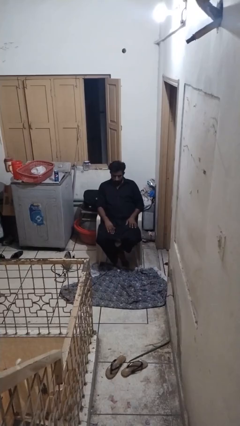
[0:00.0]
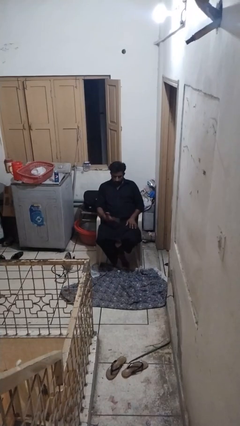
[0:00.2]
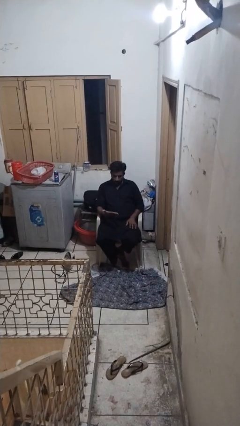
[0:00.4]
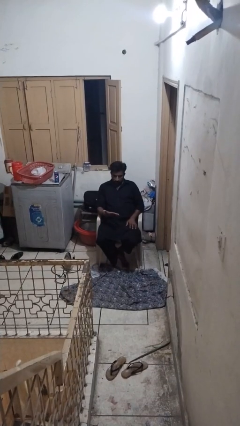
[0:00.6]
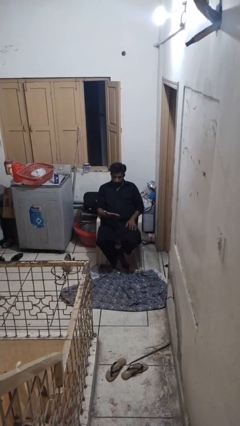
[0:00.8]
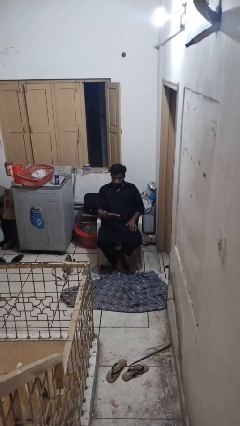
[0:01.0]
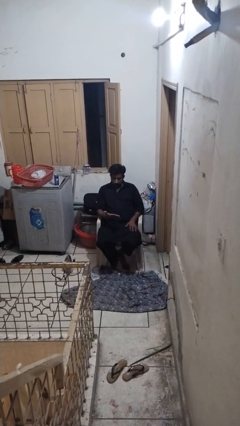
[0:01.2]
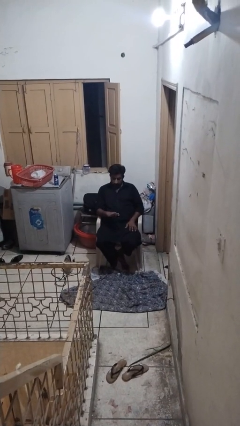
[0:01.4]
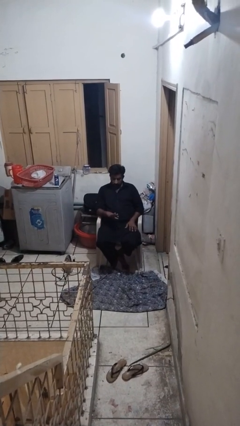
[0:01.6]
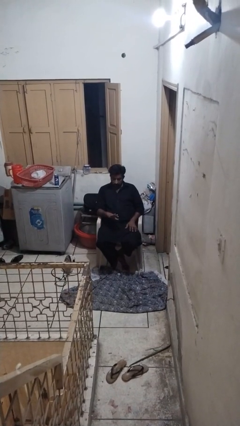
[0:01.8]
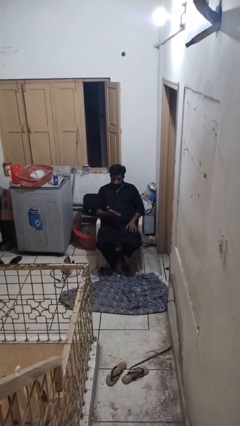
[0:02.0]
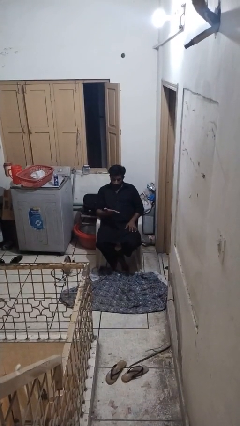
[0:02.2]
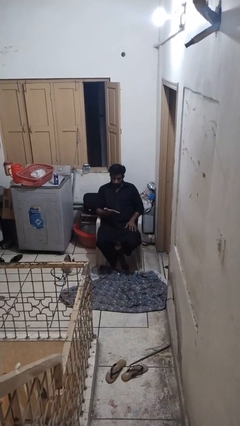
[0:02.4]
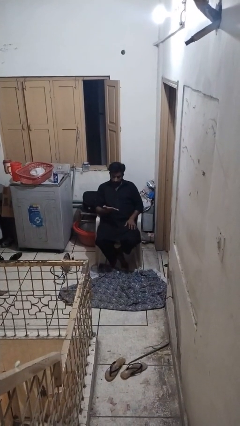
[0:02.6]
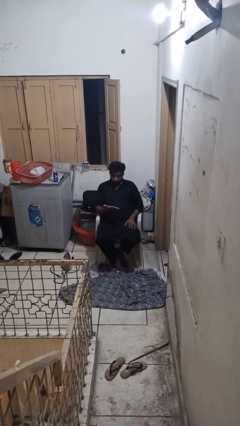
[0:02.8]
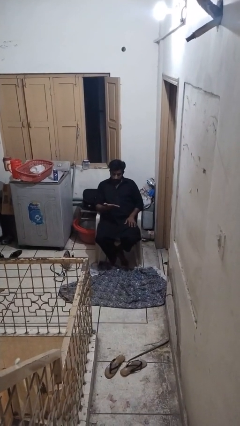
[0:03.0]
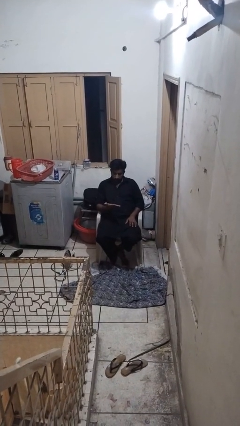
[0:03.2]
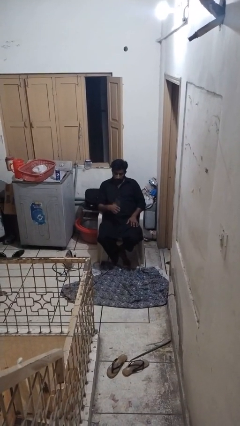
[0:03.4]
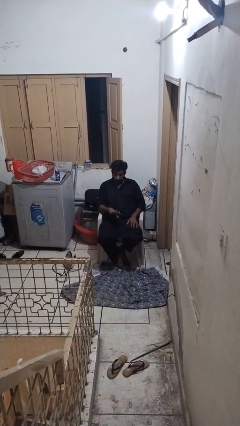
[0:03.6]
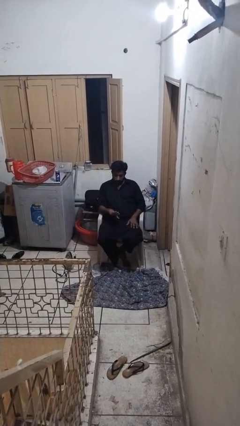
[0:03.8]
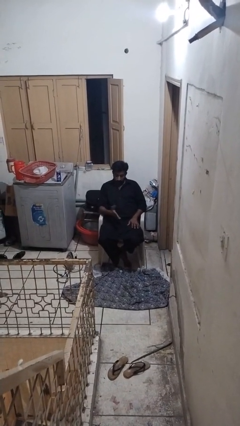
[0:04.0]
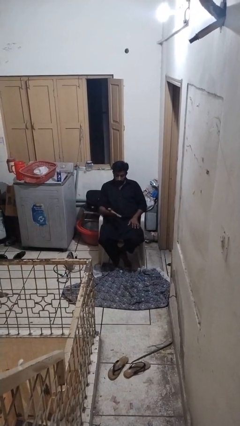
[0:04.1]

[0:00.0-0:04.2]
person looks at hands in lap

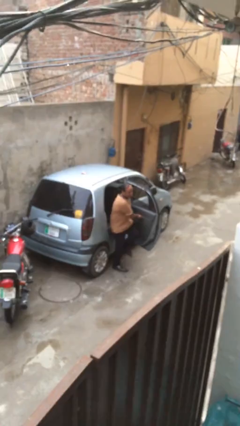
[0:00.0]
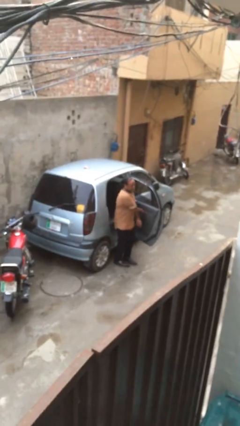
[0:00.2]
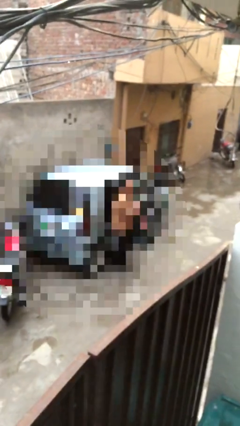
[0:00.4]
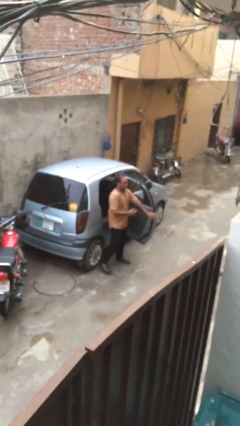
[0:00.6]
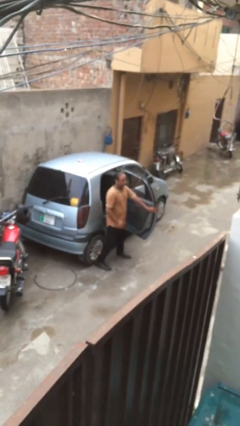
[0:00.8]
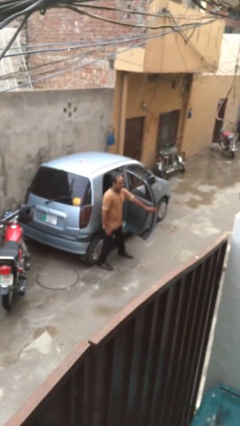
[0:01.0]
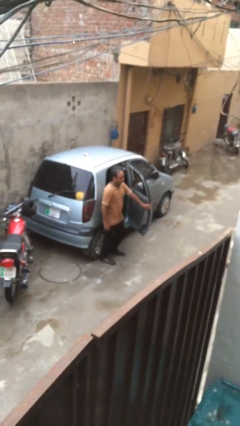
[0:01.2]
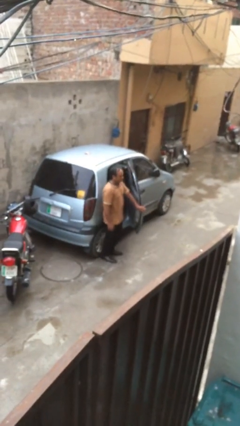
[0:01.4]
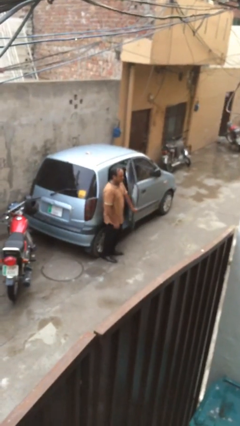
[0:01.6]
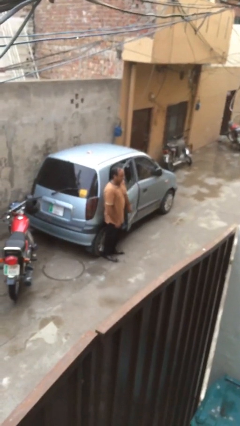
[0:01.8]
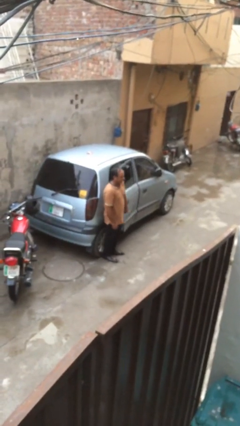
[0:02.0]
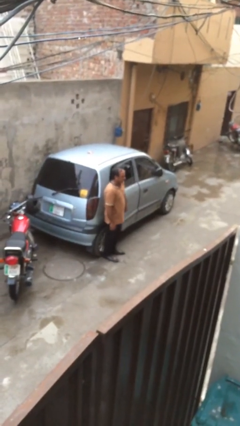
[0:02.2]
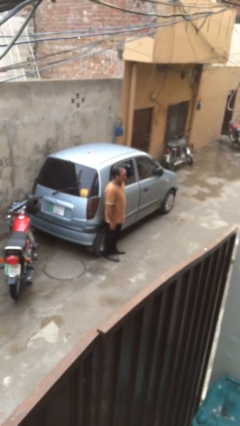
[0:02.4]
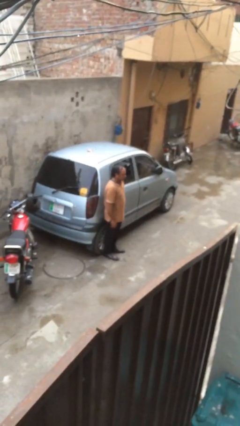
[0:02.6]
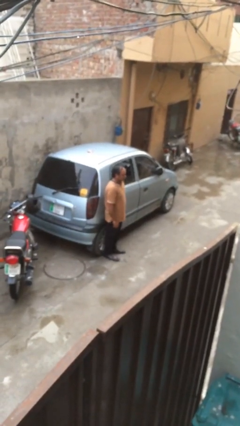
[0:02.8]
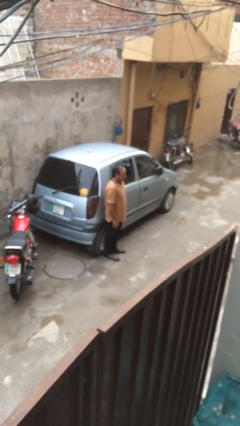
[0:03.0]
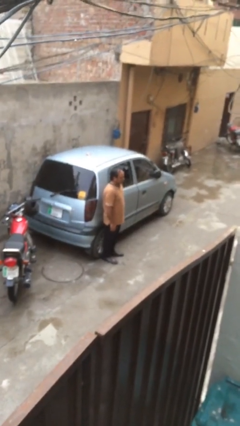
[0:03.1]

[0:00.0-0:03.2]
person closes car door

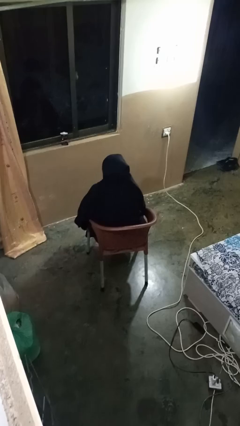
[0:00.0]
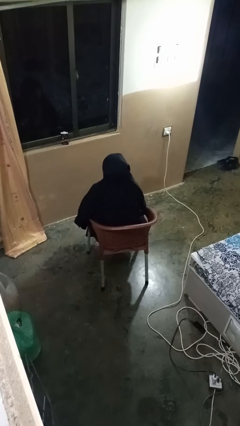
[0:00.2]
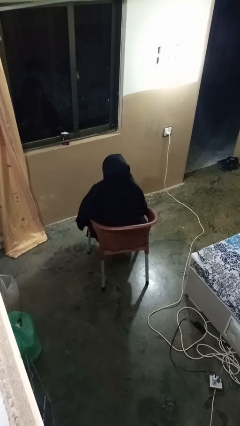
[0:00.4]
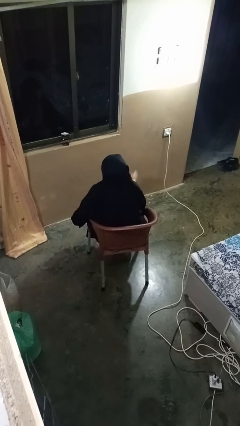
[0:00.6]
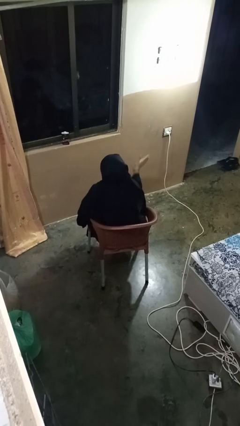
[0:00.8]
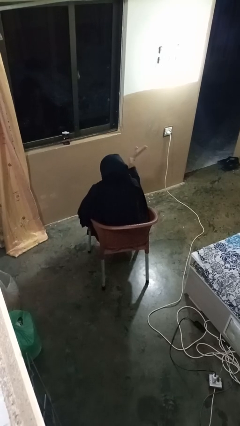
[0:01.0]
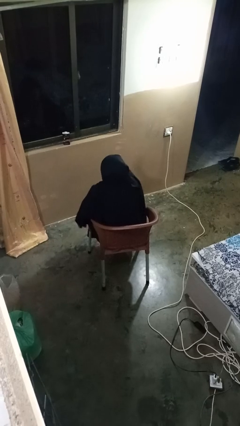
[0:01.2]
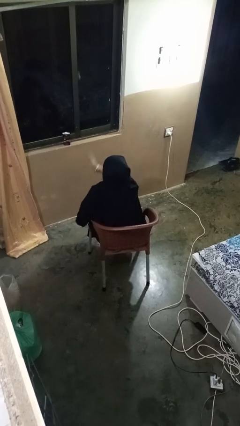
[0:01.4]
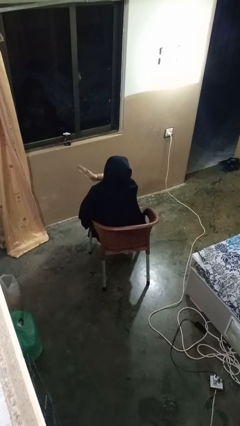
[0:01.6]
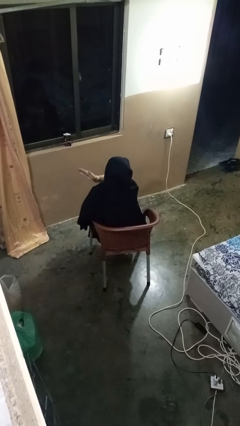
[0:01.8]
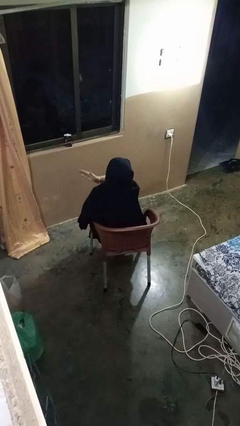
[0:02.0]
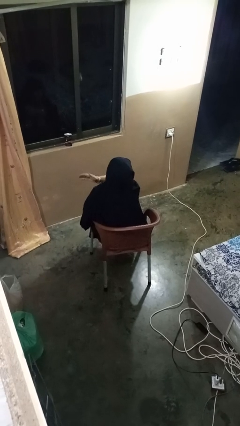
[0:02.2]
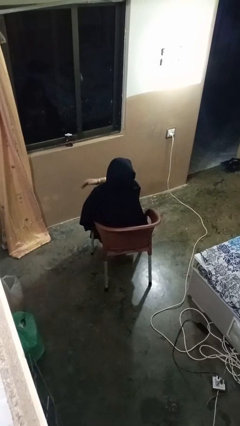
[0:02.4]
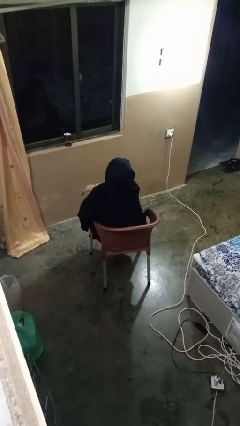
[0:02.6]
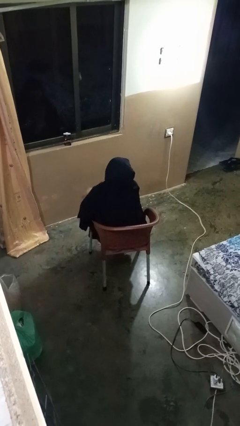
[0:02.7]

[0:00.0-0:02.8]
person gestures swipe left

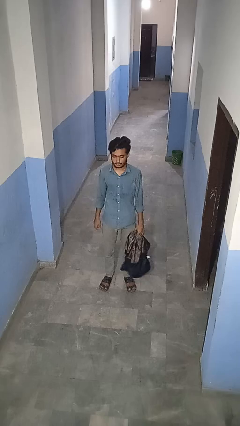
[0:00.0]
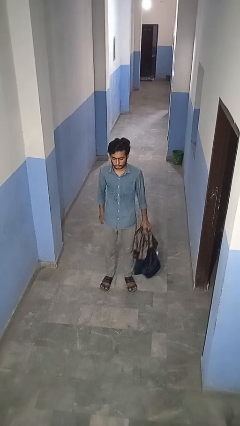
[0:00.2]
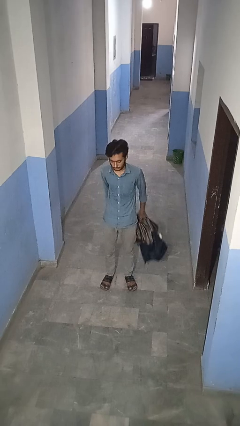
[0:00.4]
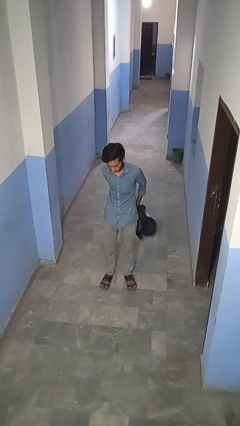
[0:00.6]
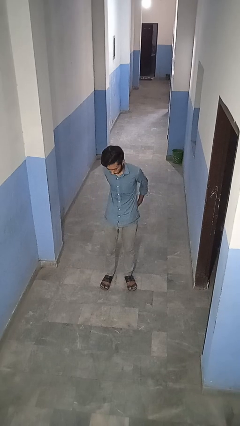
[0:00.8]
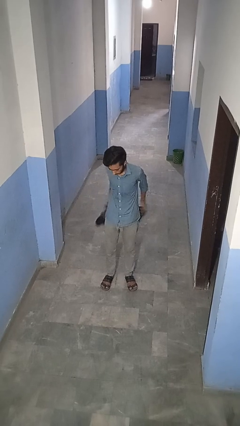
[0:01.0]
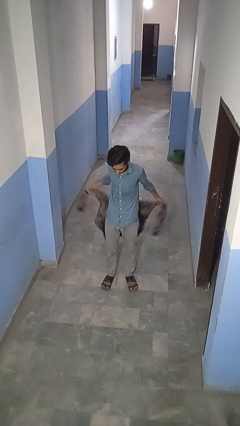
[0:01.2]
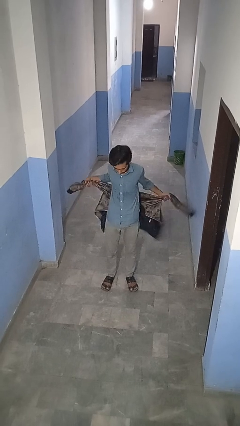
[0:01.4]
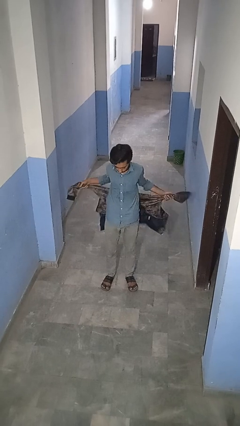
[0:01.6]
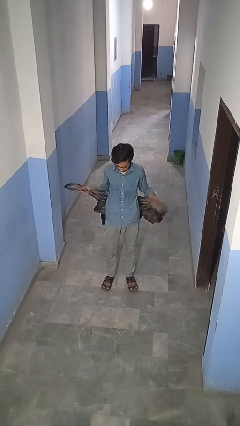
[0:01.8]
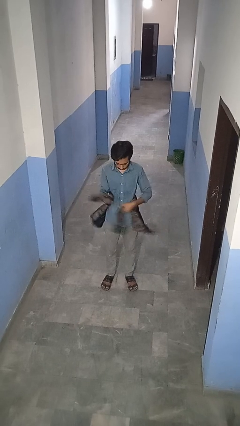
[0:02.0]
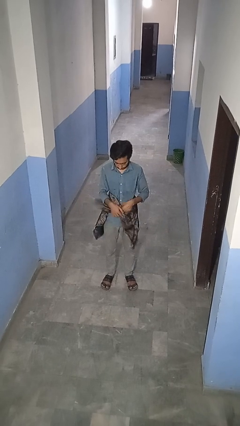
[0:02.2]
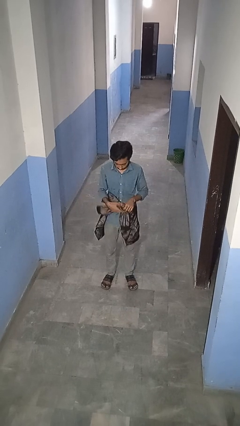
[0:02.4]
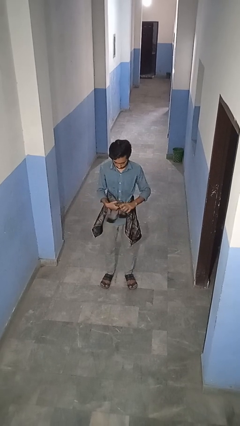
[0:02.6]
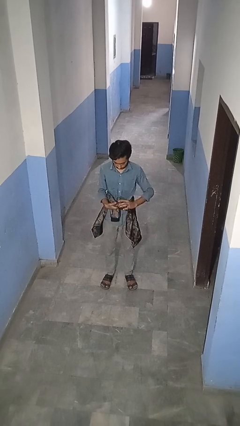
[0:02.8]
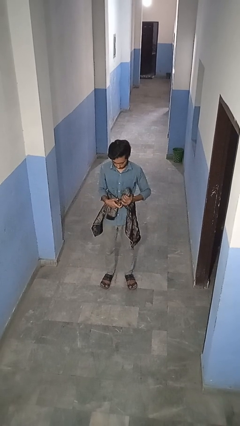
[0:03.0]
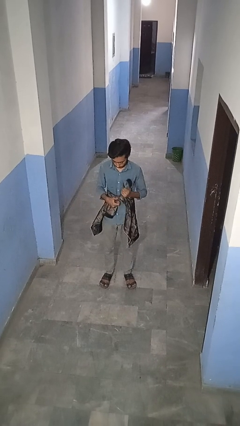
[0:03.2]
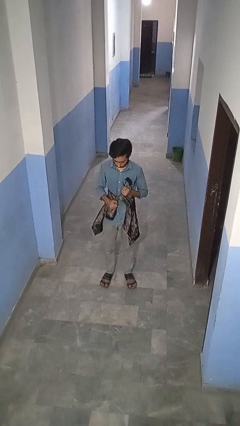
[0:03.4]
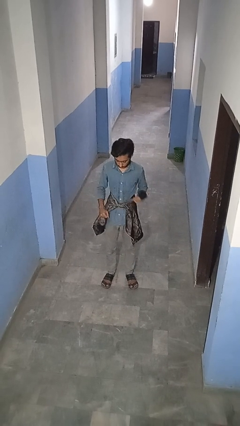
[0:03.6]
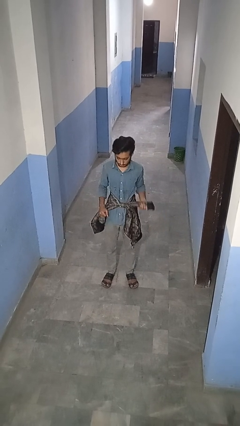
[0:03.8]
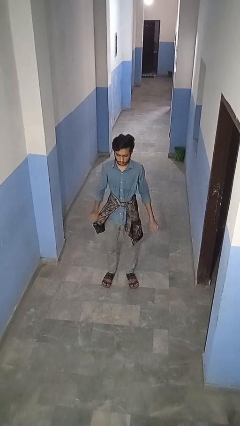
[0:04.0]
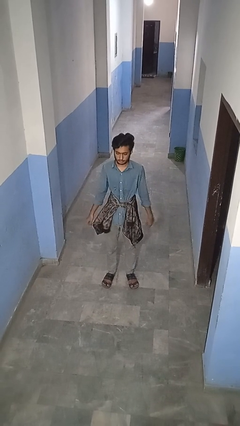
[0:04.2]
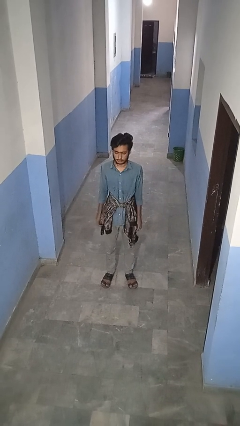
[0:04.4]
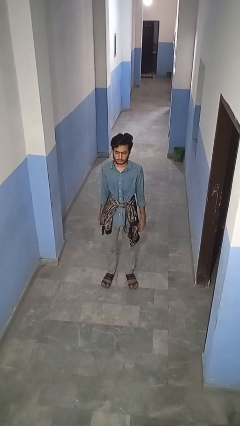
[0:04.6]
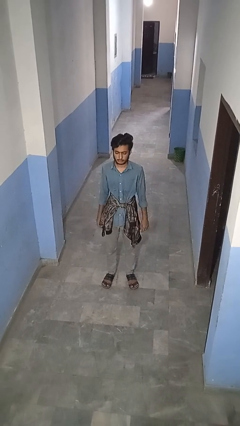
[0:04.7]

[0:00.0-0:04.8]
person ties jacket around waist

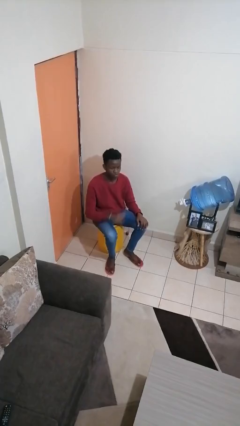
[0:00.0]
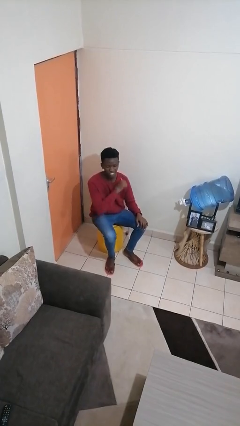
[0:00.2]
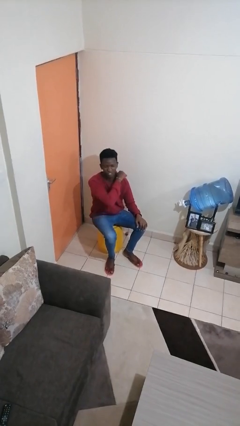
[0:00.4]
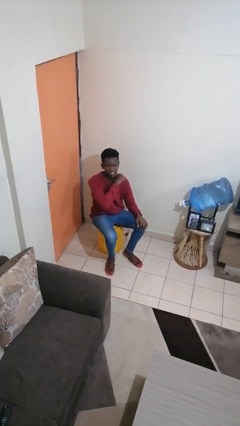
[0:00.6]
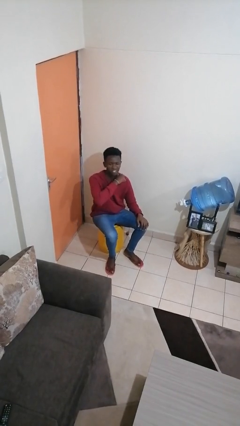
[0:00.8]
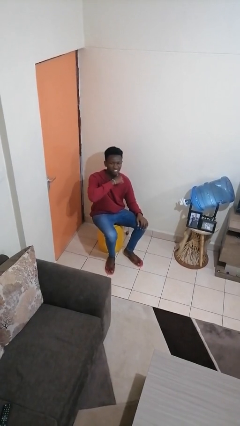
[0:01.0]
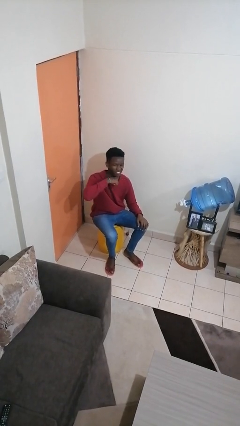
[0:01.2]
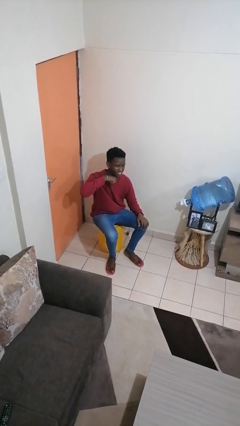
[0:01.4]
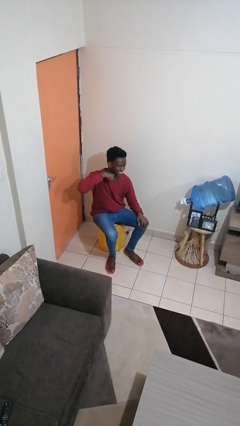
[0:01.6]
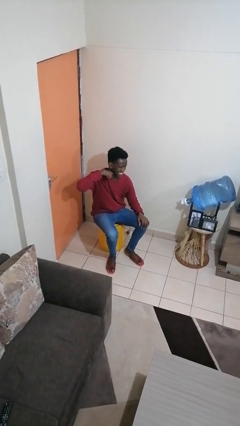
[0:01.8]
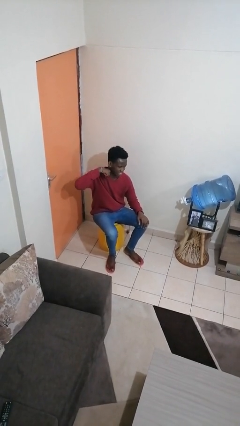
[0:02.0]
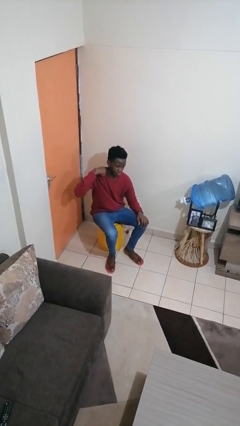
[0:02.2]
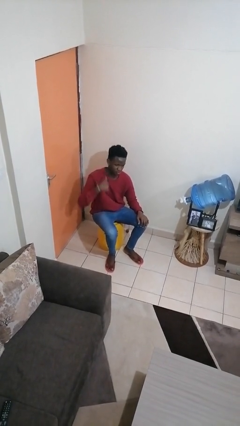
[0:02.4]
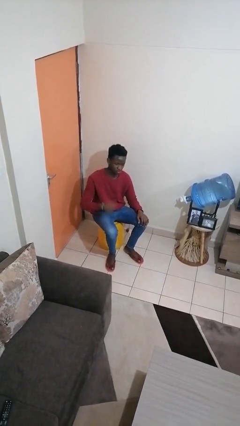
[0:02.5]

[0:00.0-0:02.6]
person gestures cut

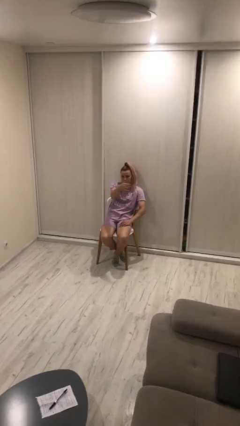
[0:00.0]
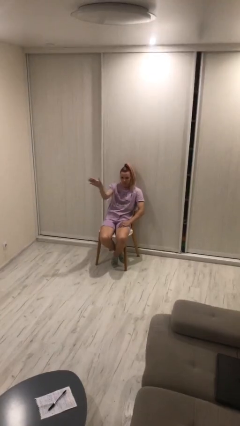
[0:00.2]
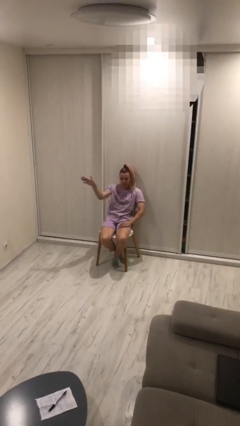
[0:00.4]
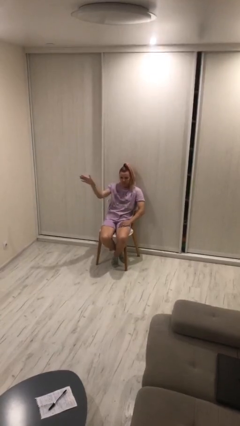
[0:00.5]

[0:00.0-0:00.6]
person gestures swipe right
